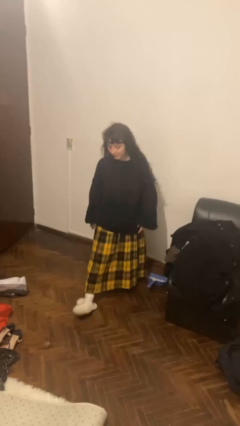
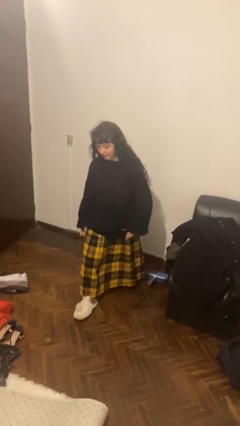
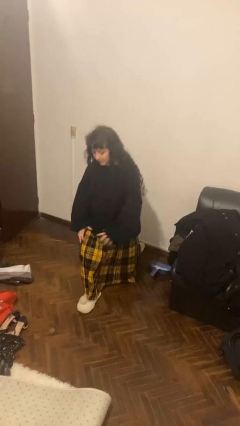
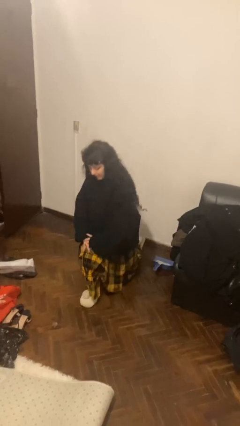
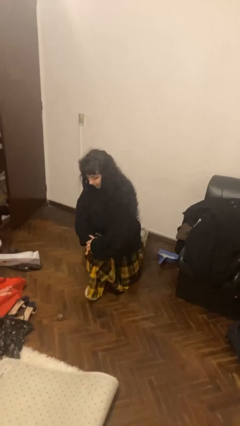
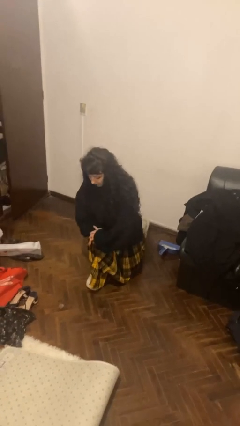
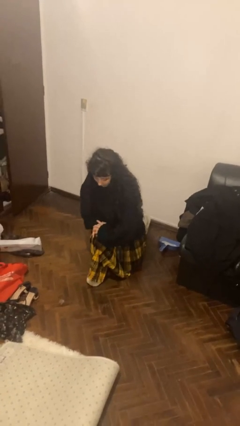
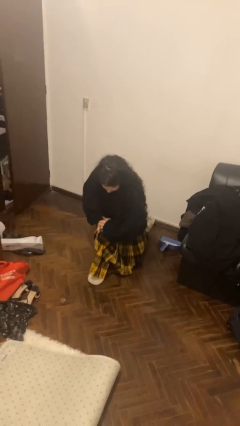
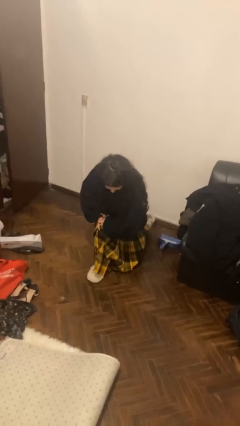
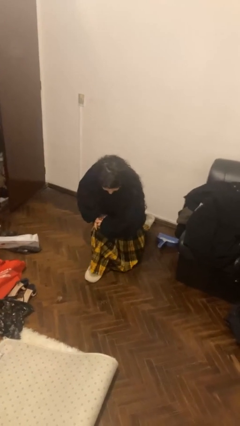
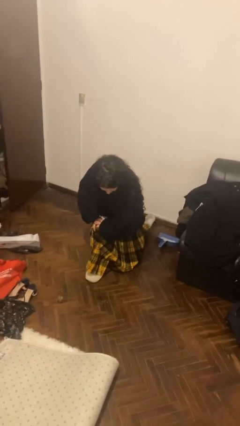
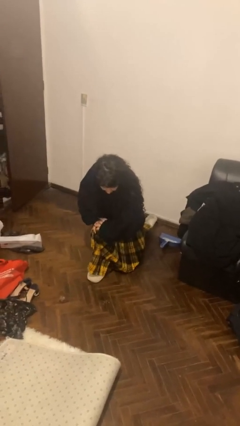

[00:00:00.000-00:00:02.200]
person kneels

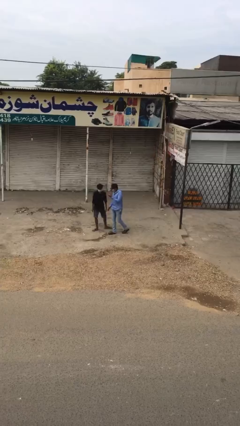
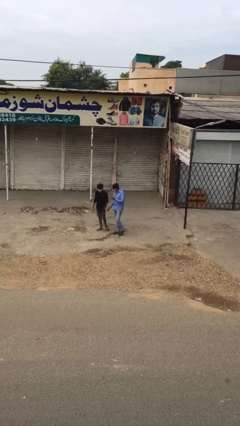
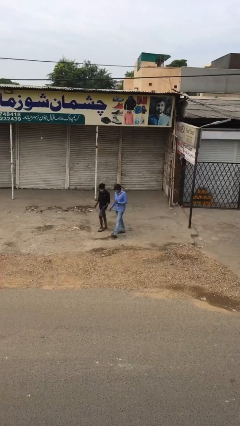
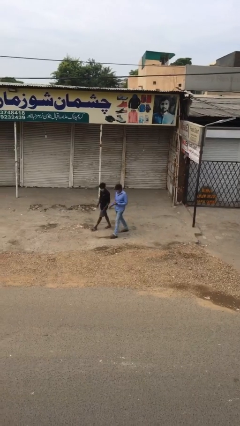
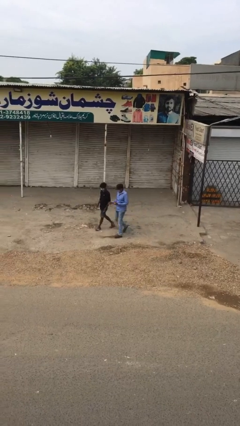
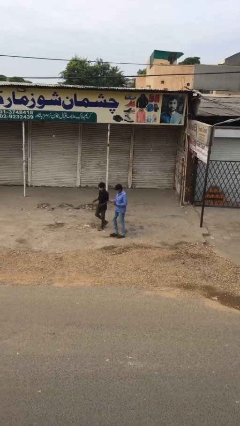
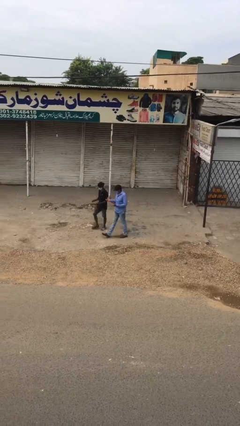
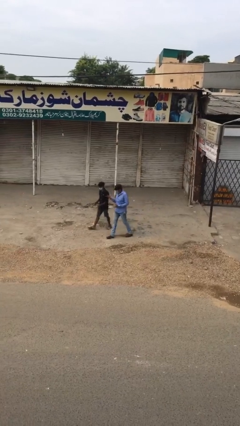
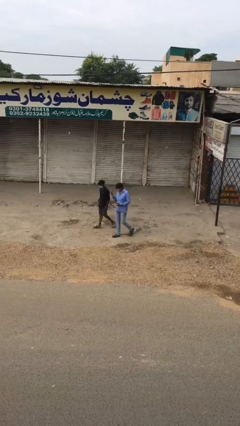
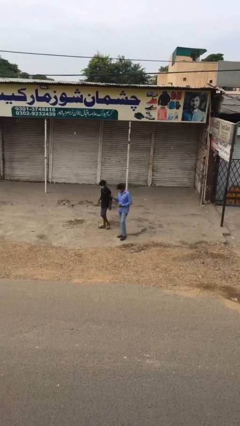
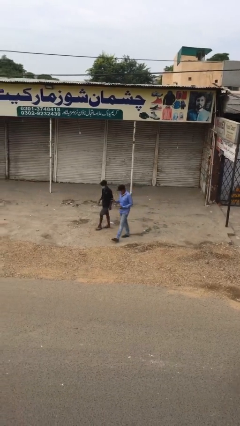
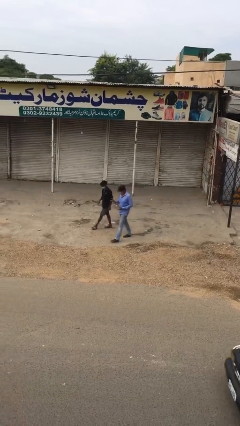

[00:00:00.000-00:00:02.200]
person talks to person

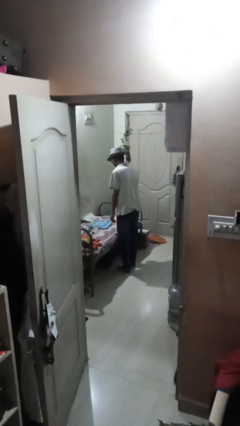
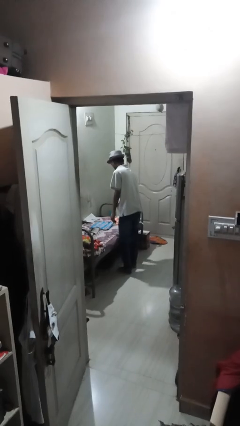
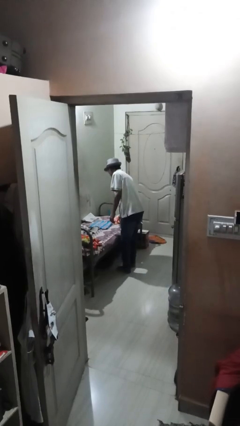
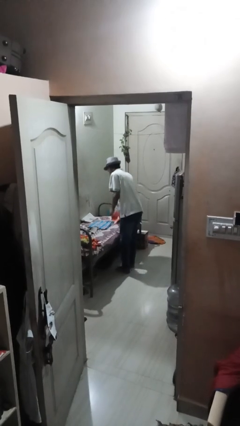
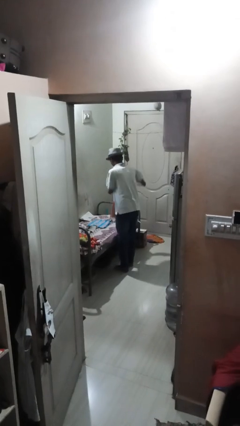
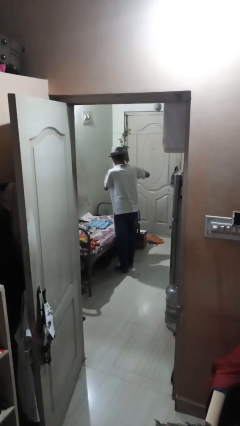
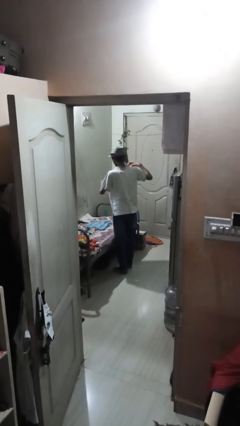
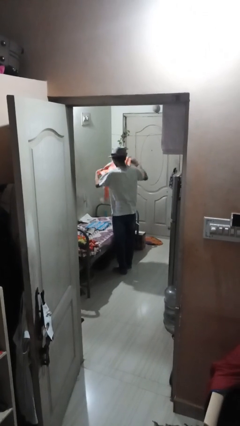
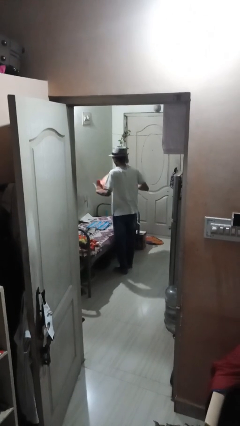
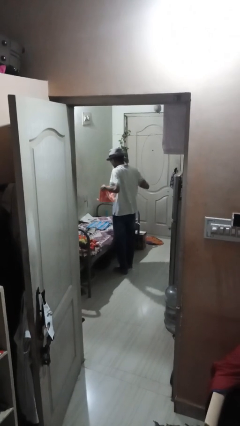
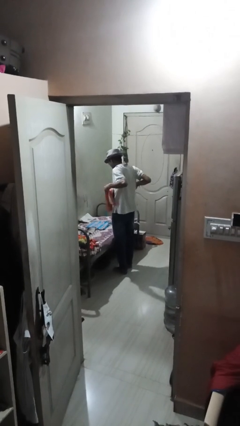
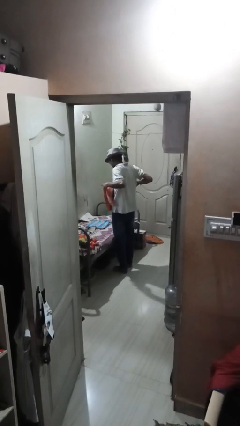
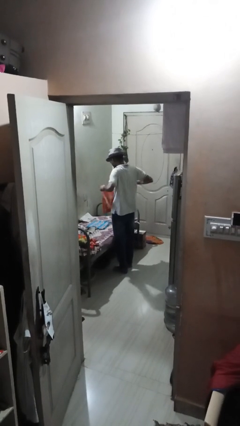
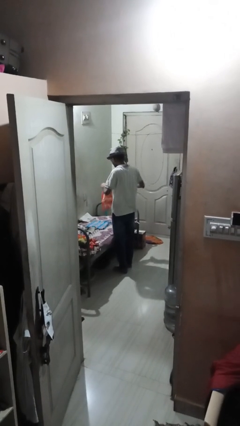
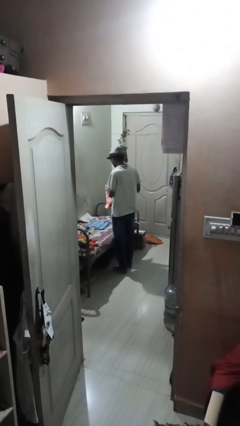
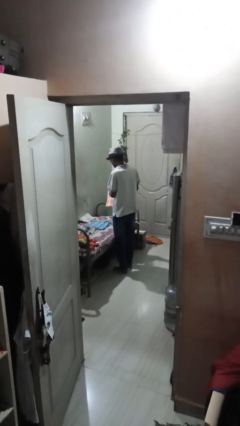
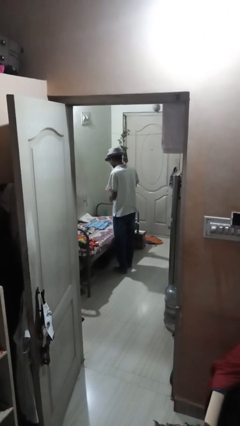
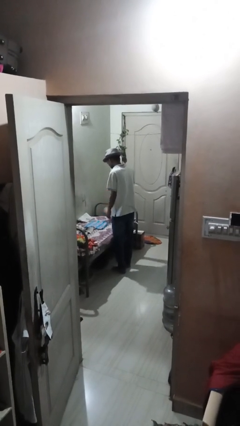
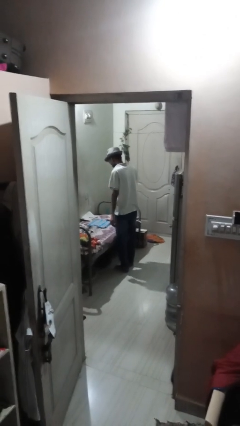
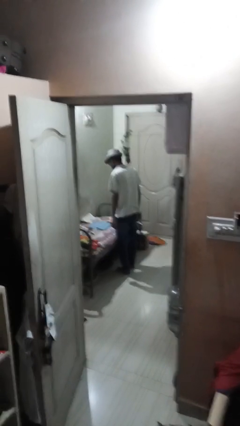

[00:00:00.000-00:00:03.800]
person folds towel

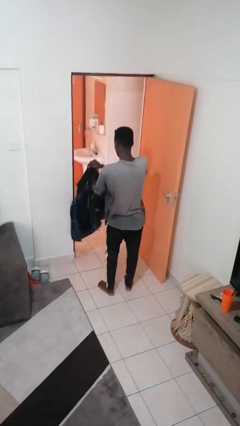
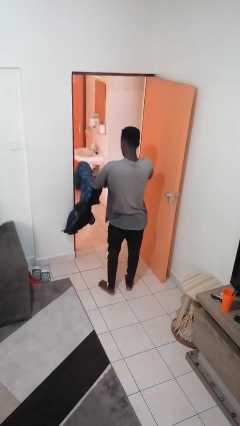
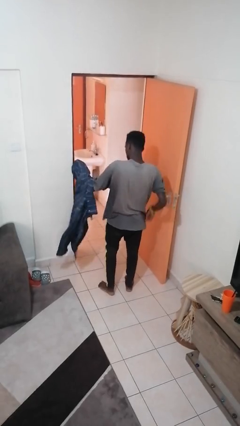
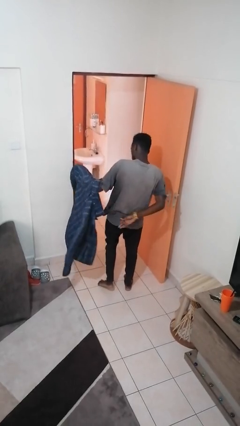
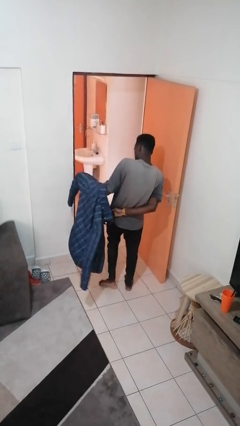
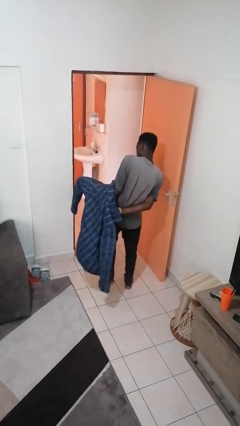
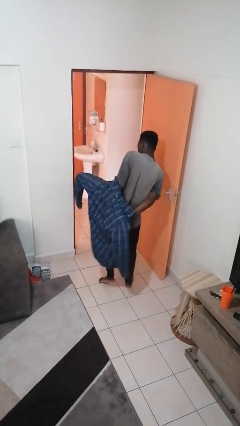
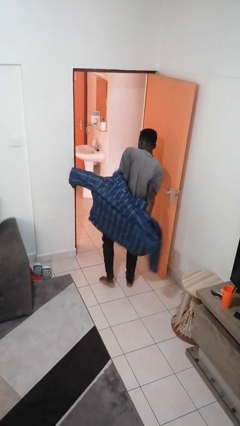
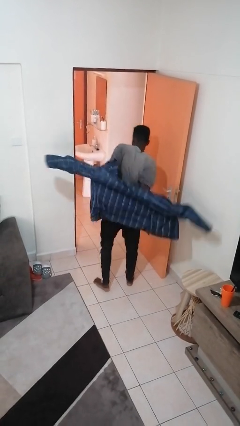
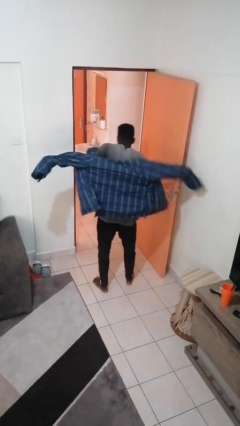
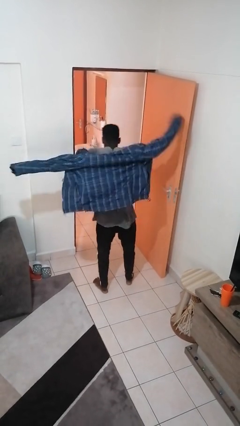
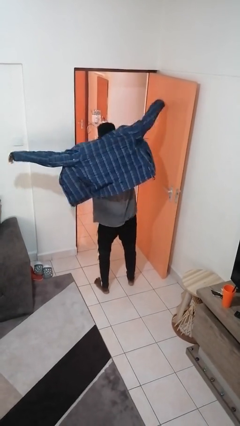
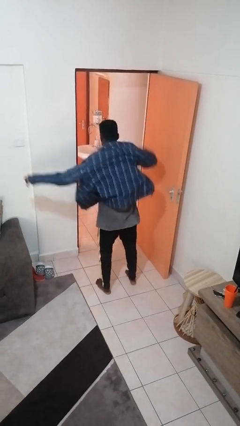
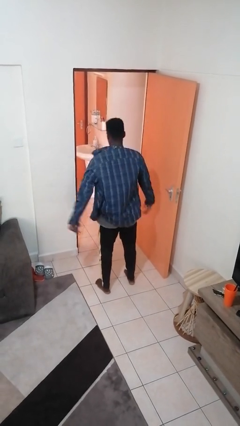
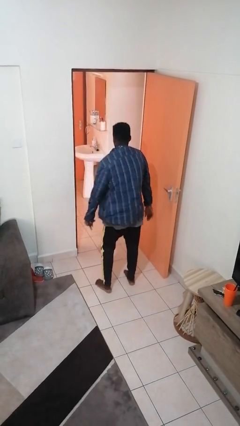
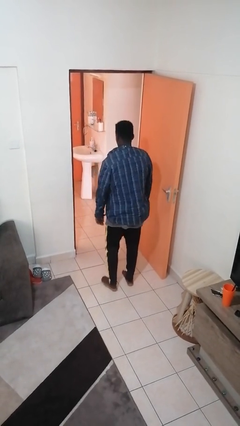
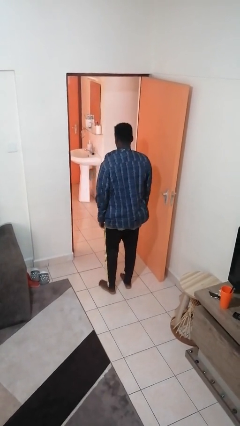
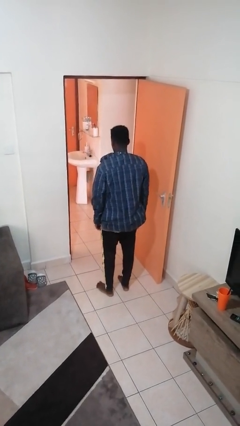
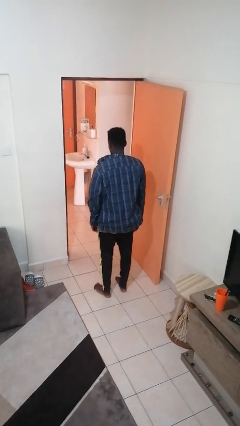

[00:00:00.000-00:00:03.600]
person puts on jacket

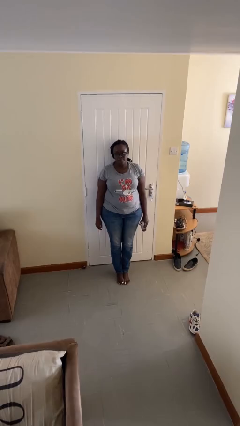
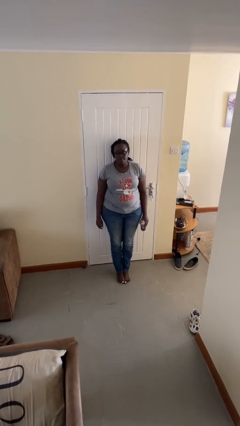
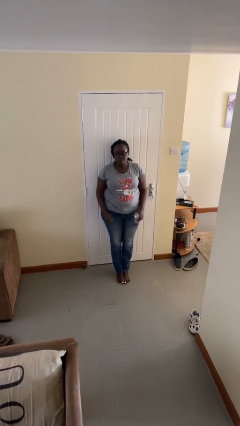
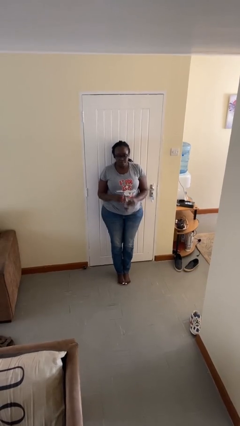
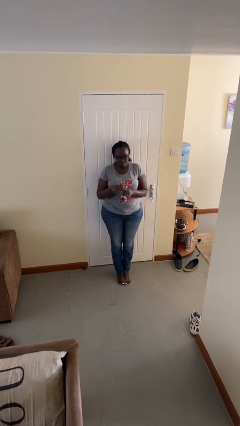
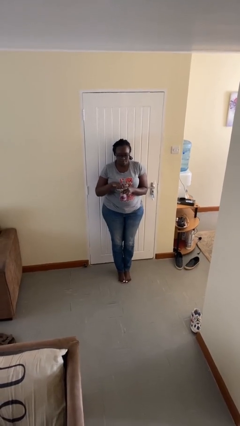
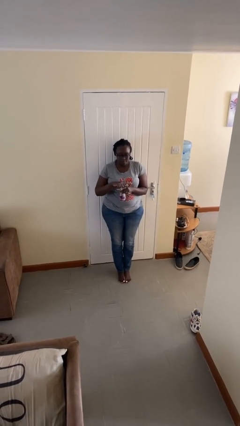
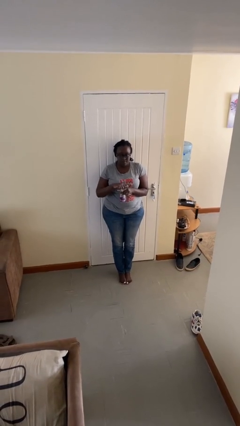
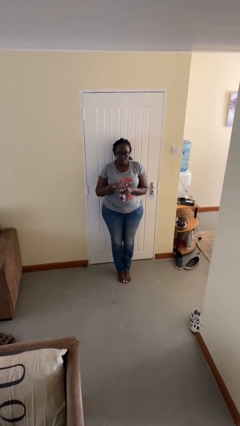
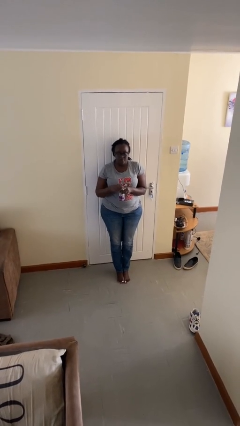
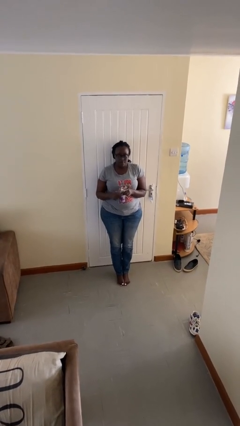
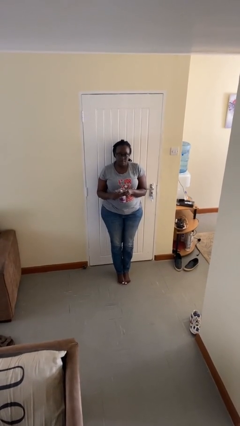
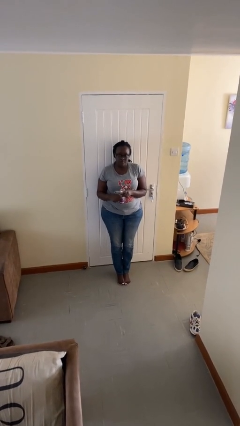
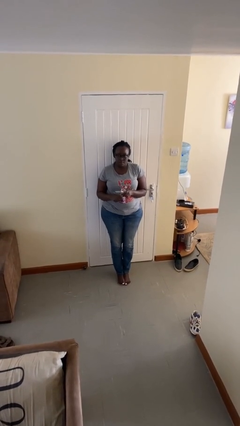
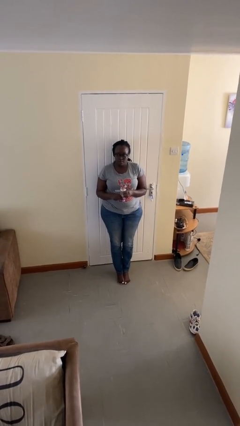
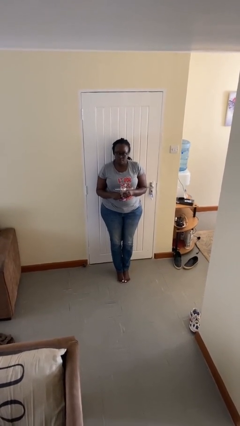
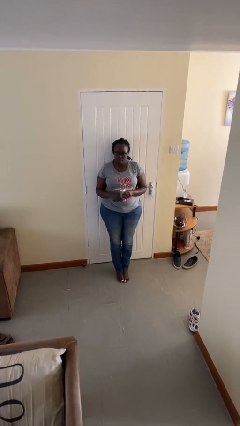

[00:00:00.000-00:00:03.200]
person opens beverage can

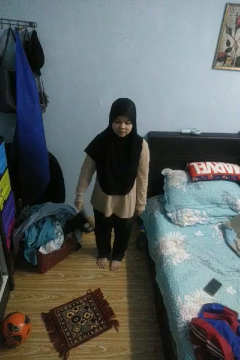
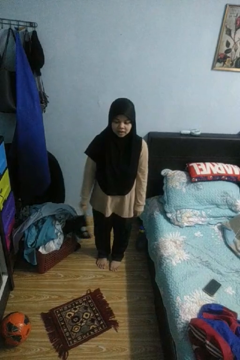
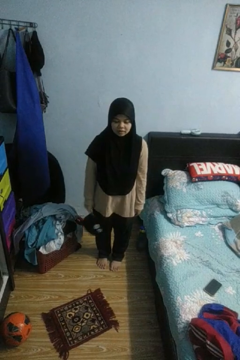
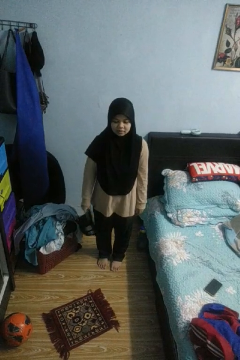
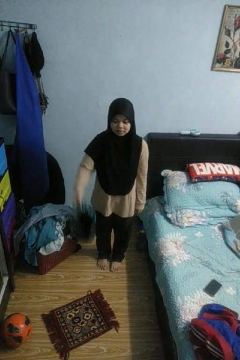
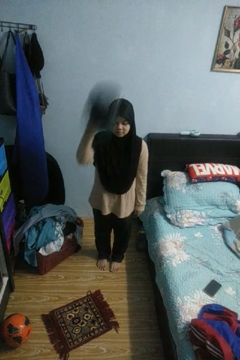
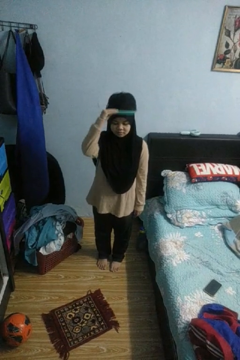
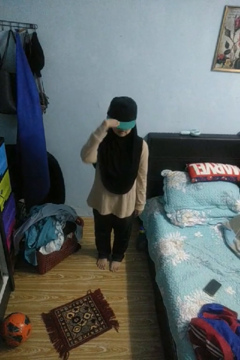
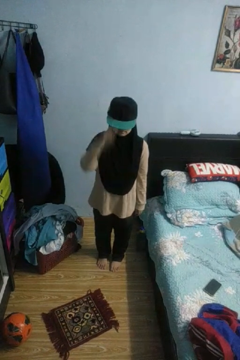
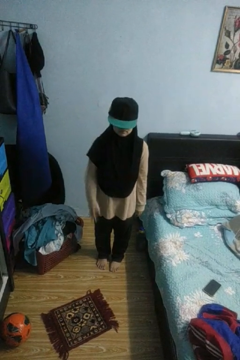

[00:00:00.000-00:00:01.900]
person puts on hat

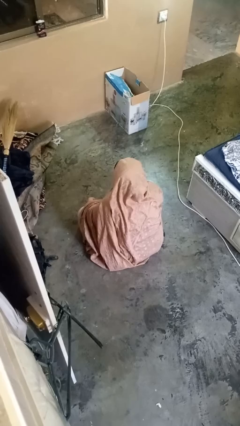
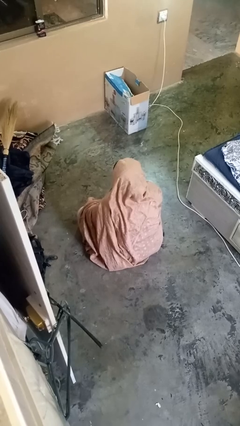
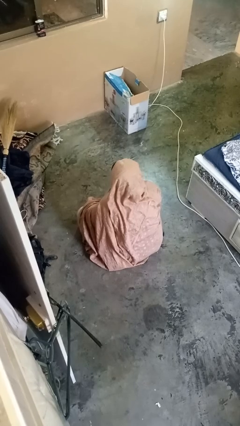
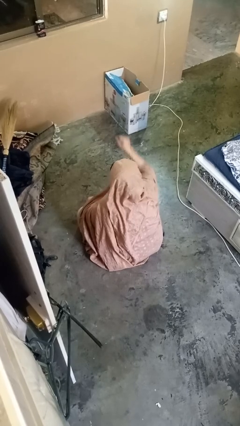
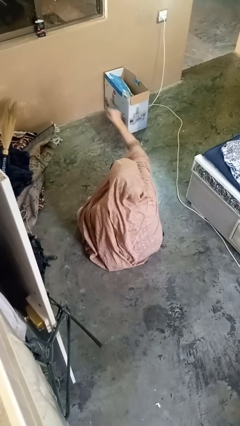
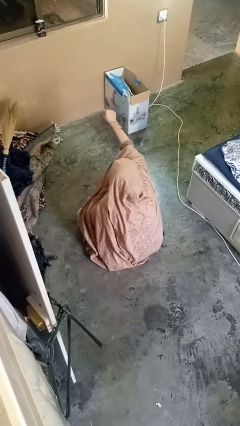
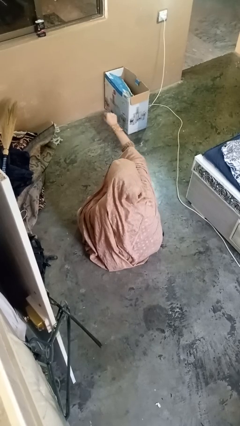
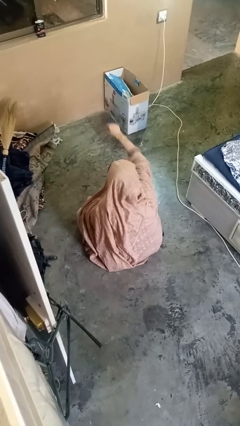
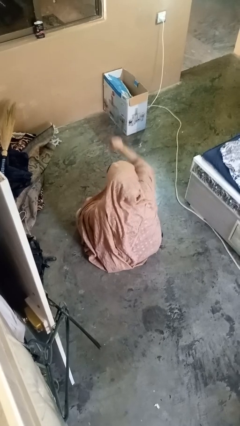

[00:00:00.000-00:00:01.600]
person punches
